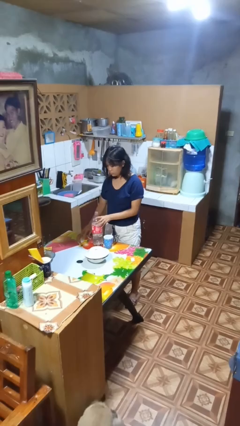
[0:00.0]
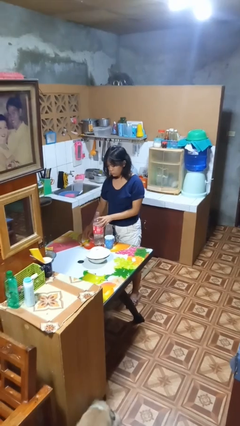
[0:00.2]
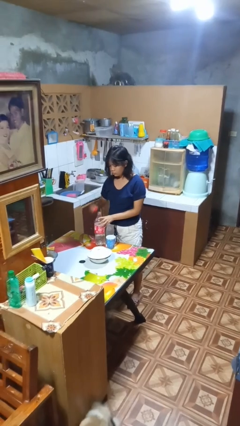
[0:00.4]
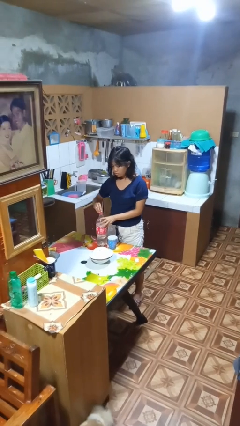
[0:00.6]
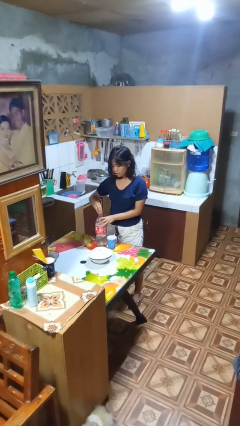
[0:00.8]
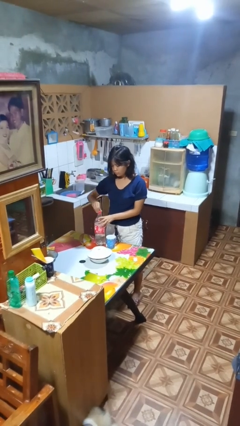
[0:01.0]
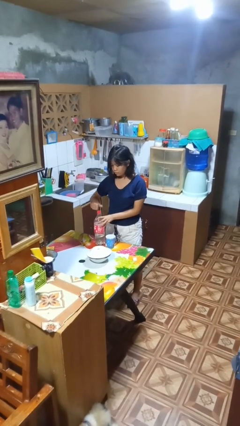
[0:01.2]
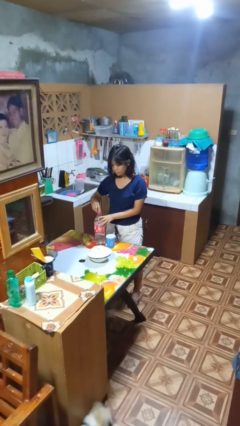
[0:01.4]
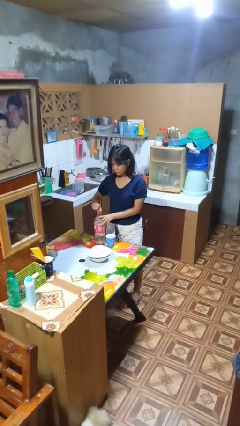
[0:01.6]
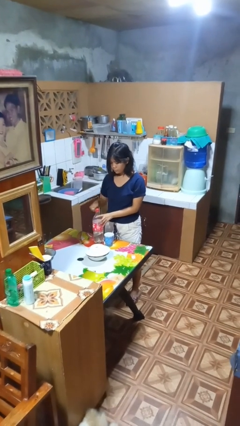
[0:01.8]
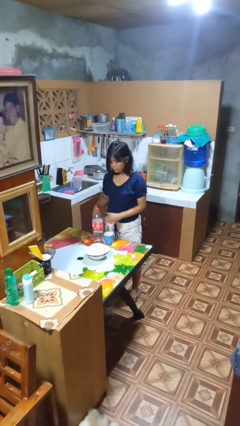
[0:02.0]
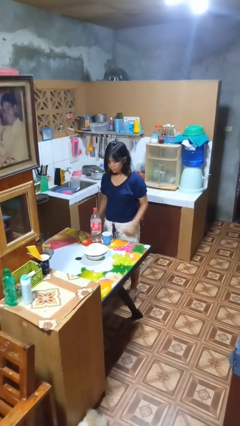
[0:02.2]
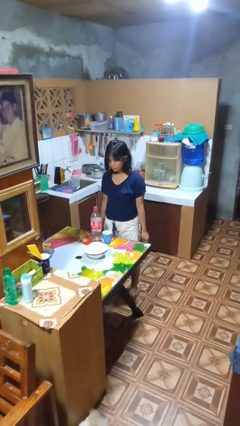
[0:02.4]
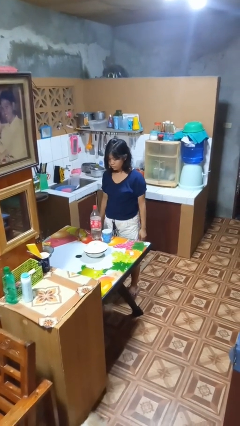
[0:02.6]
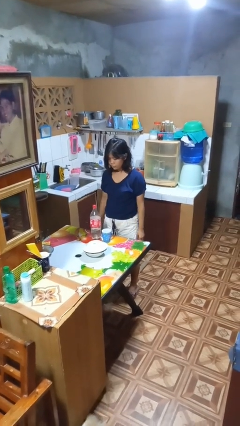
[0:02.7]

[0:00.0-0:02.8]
person screws lid to bottle

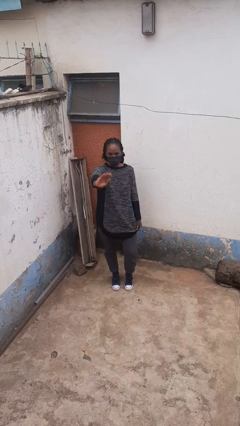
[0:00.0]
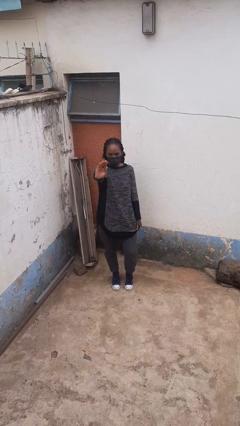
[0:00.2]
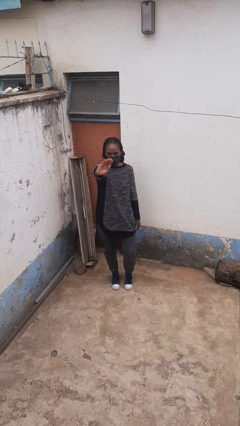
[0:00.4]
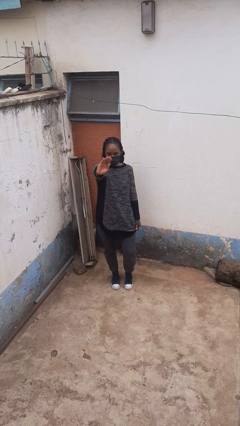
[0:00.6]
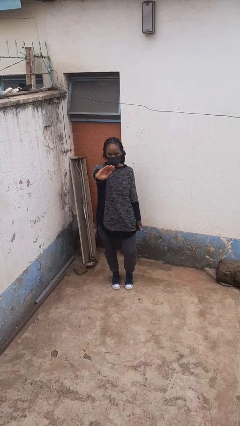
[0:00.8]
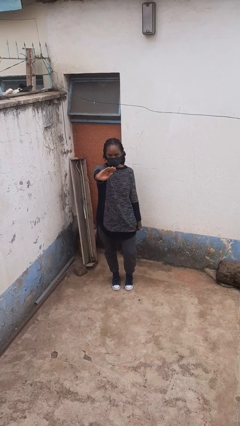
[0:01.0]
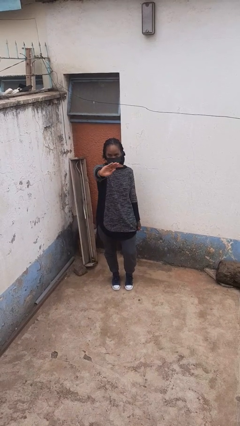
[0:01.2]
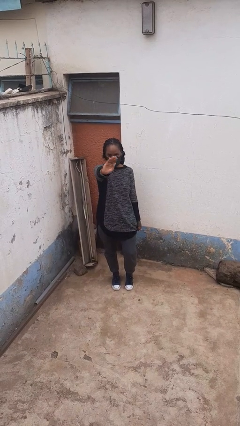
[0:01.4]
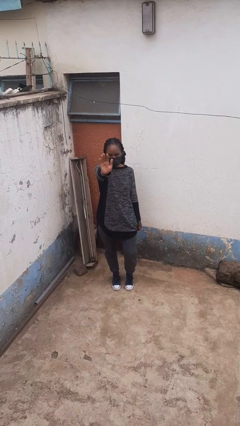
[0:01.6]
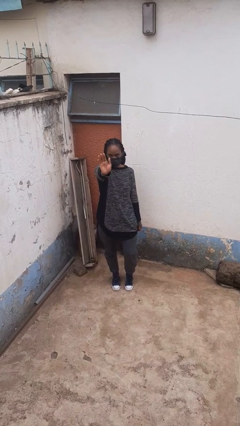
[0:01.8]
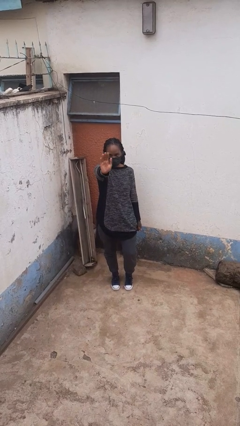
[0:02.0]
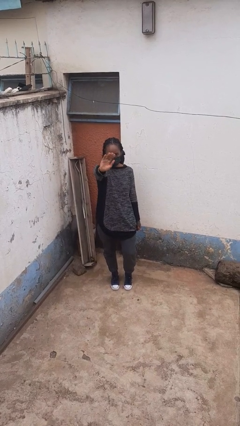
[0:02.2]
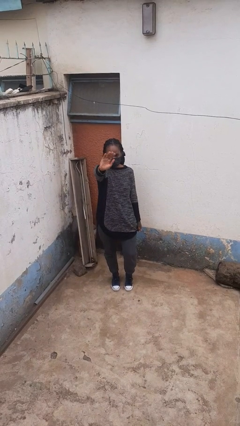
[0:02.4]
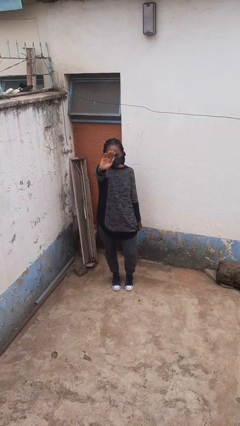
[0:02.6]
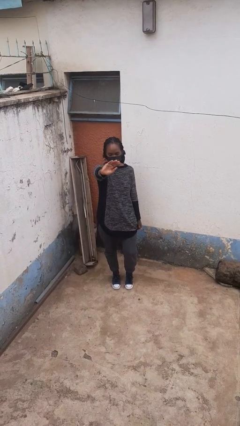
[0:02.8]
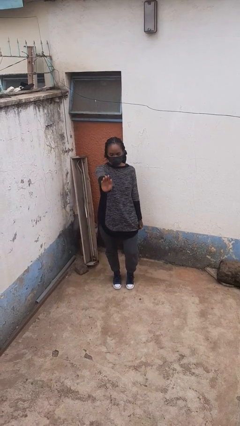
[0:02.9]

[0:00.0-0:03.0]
person waves at person

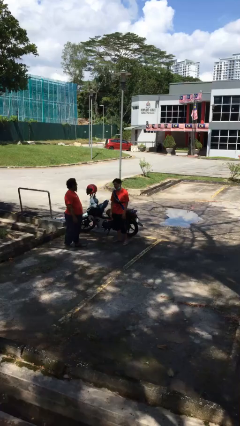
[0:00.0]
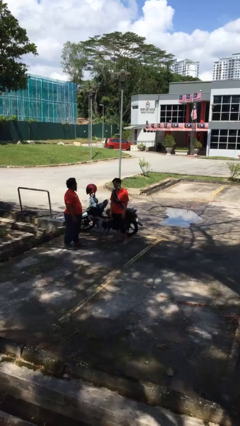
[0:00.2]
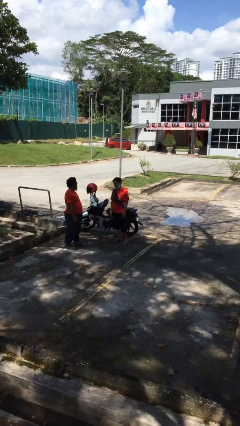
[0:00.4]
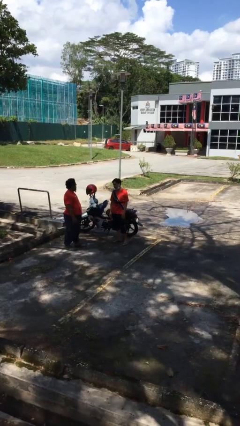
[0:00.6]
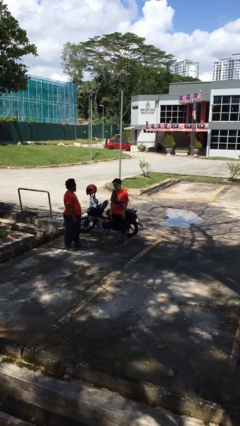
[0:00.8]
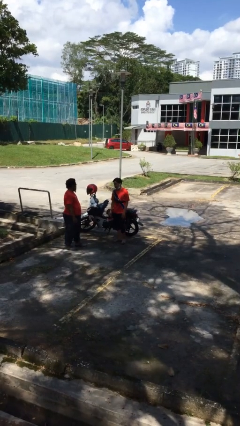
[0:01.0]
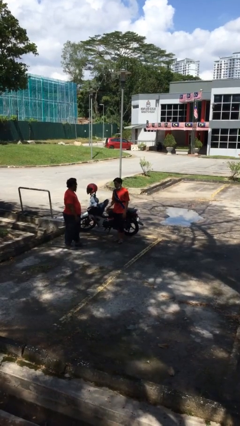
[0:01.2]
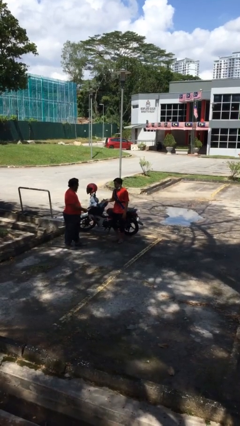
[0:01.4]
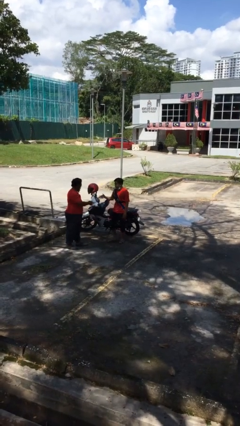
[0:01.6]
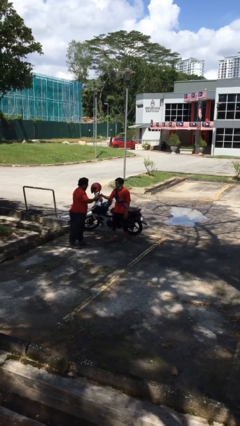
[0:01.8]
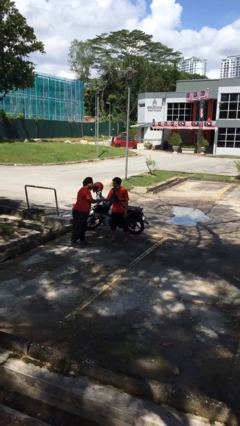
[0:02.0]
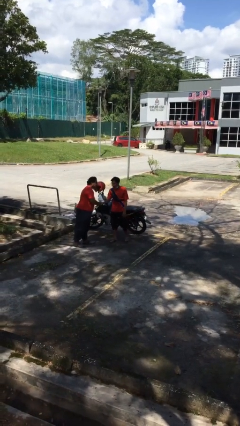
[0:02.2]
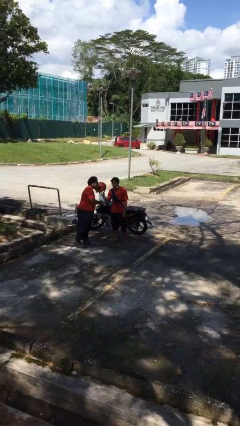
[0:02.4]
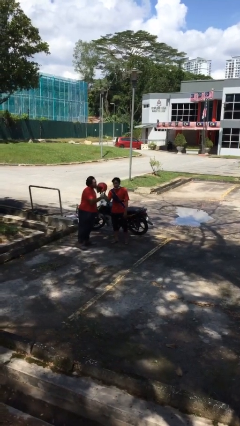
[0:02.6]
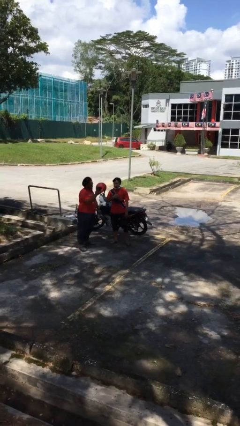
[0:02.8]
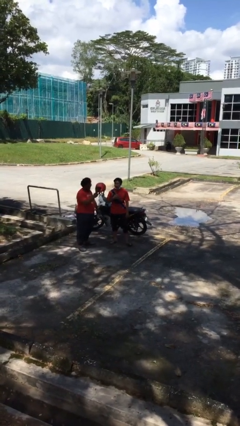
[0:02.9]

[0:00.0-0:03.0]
person shakes hand

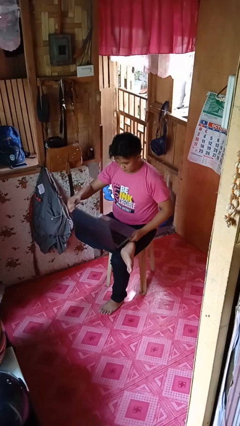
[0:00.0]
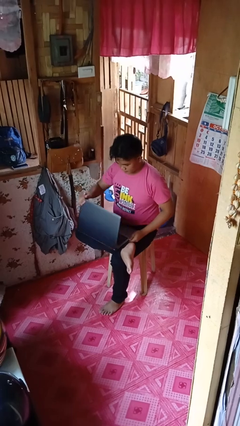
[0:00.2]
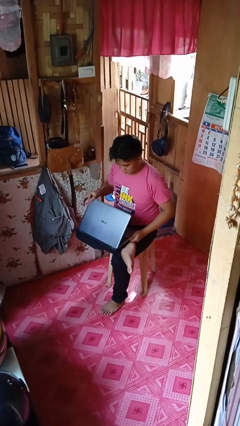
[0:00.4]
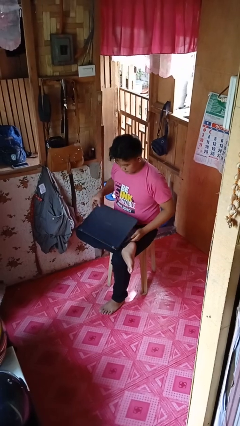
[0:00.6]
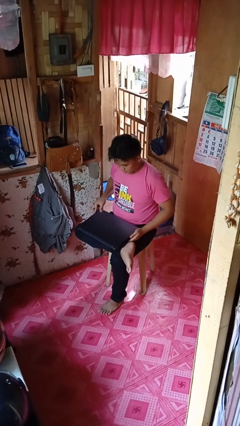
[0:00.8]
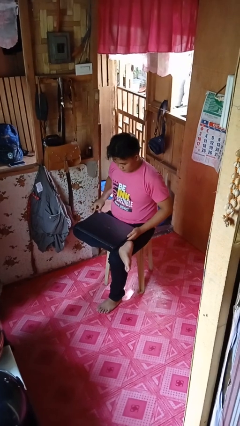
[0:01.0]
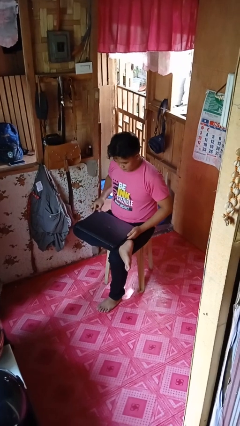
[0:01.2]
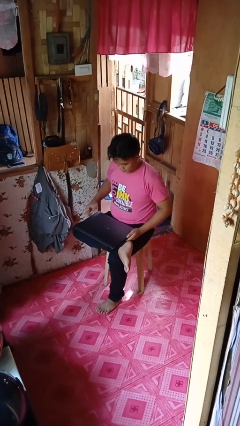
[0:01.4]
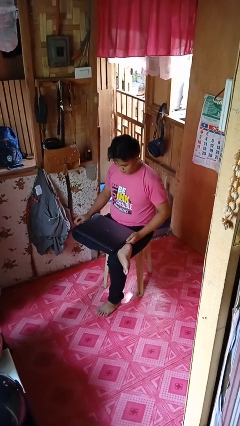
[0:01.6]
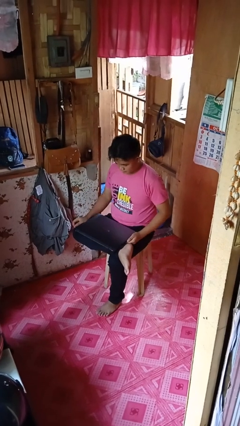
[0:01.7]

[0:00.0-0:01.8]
person closes laptop

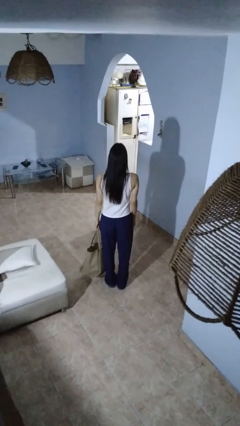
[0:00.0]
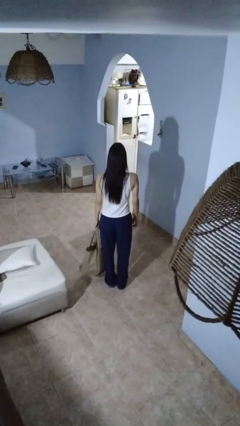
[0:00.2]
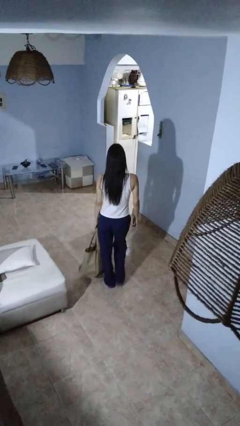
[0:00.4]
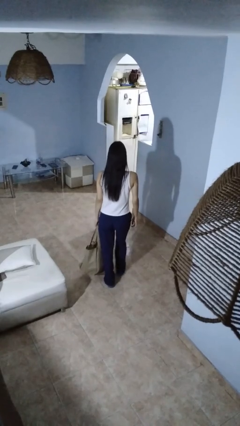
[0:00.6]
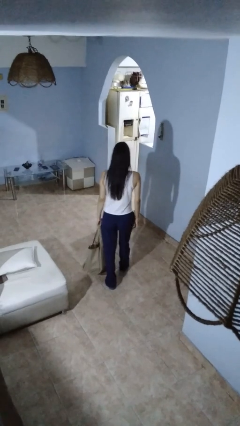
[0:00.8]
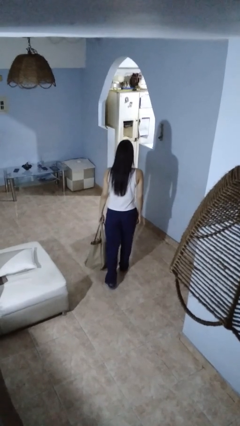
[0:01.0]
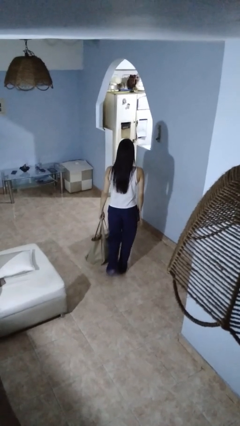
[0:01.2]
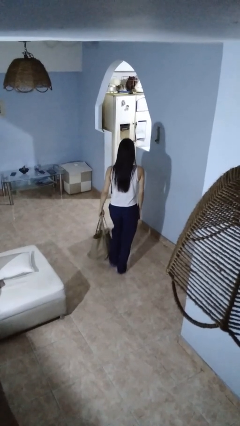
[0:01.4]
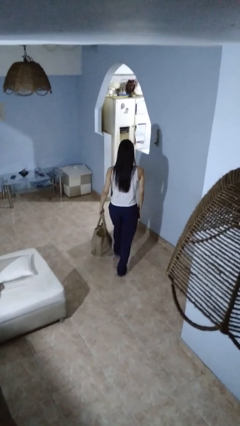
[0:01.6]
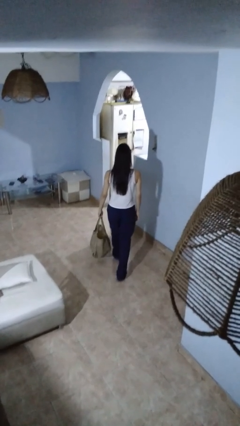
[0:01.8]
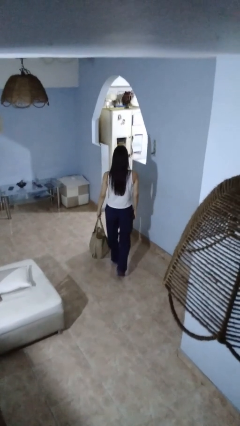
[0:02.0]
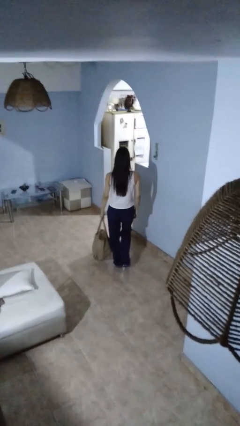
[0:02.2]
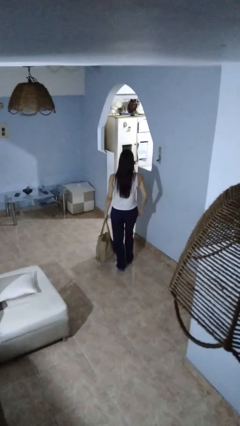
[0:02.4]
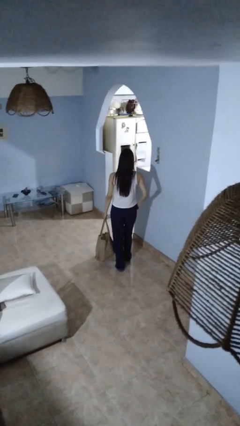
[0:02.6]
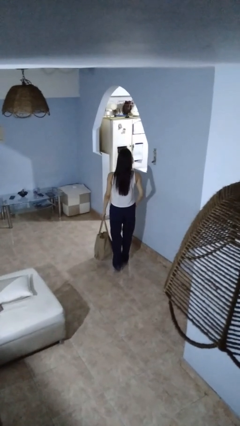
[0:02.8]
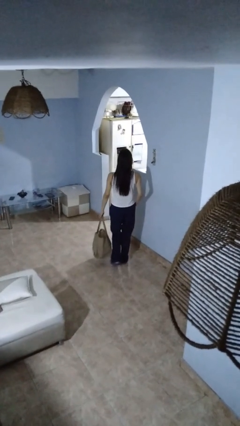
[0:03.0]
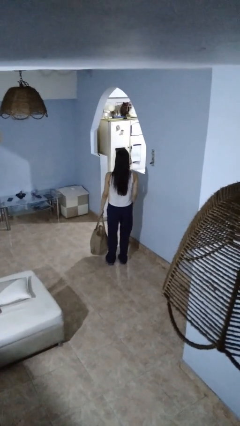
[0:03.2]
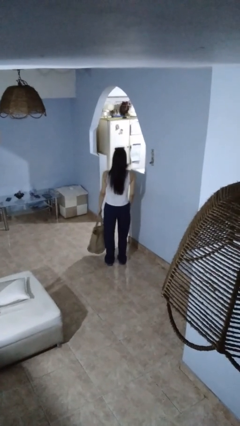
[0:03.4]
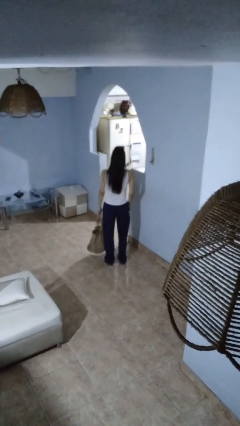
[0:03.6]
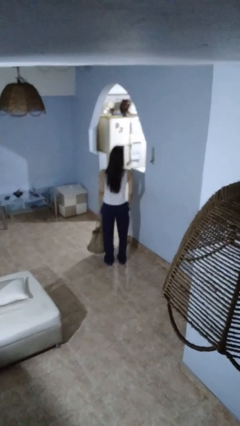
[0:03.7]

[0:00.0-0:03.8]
person carries groceries

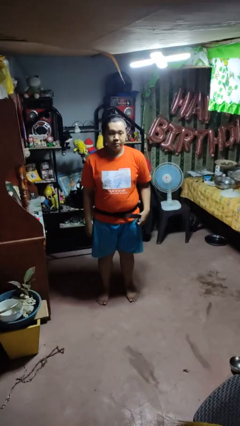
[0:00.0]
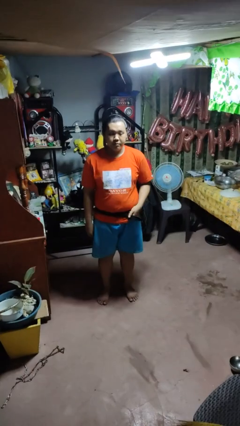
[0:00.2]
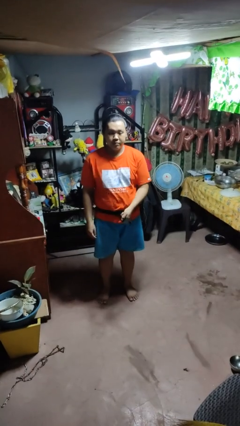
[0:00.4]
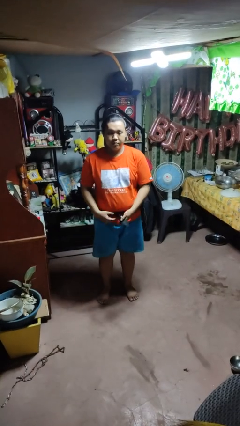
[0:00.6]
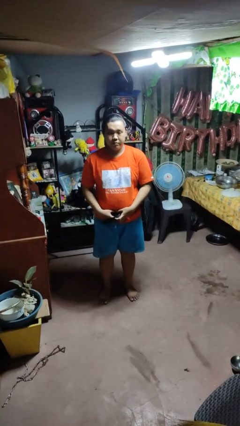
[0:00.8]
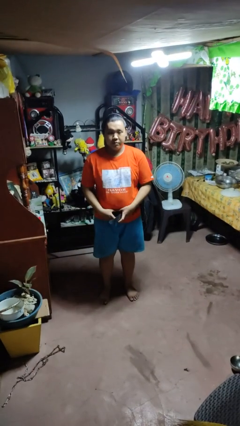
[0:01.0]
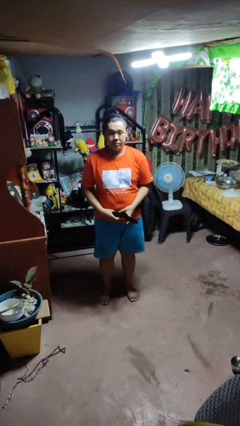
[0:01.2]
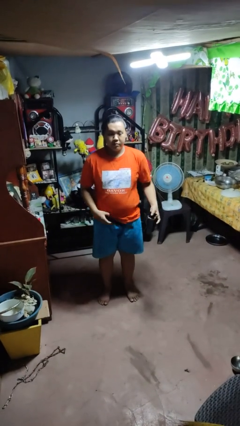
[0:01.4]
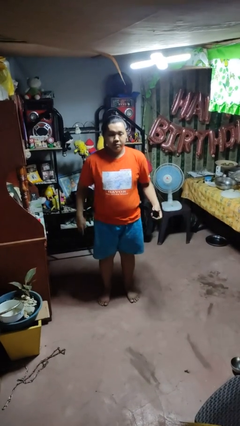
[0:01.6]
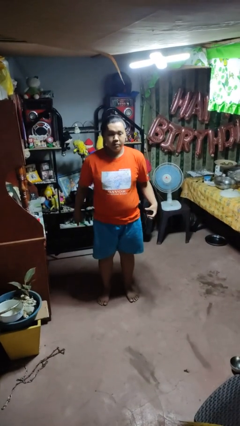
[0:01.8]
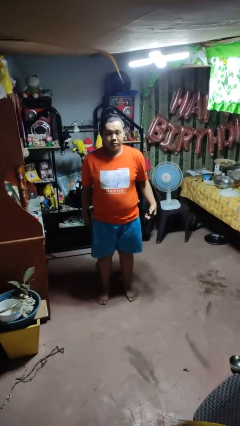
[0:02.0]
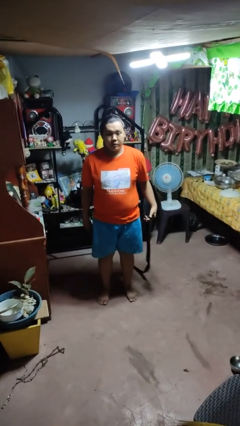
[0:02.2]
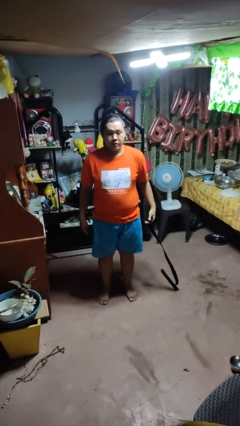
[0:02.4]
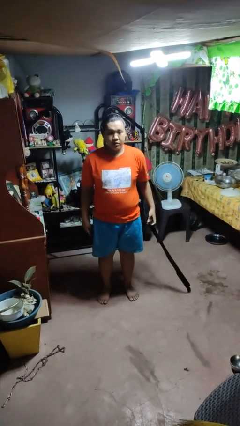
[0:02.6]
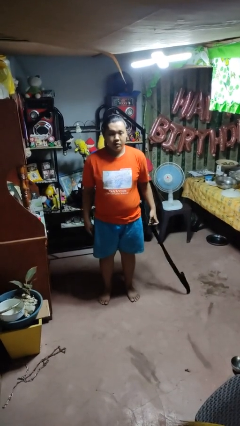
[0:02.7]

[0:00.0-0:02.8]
person takes off belt

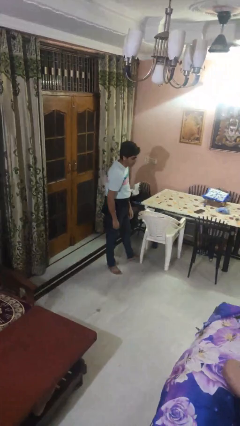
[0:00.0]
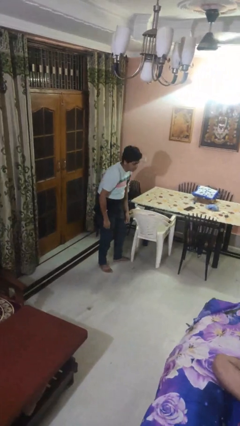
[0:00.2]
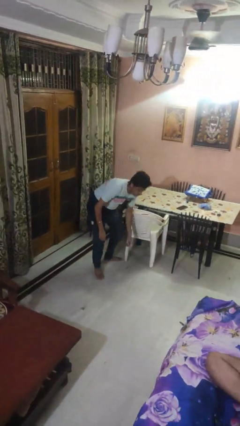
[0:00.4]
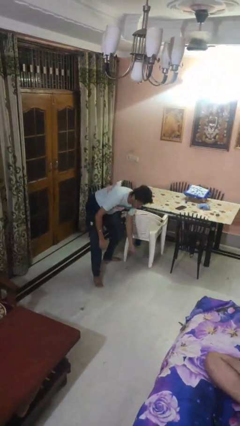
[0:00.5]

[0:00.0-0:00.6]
person trips on object on floor
